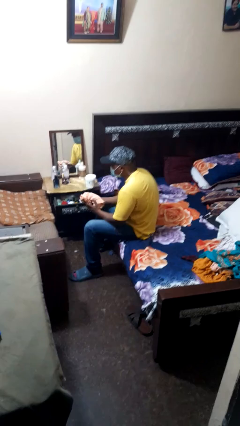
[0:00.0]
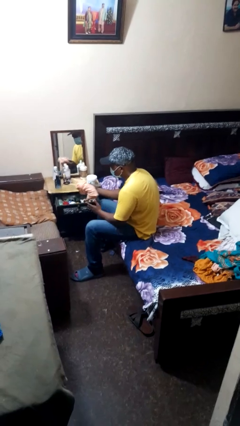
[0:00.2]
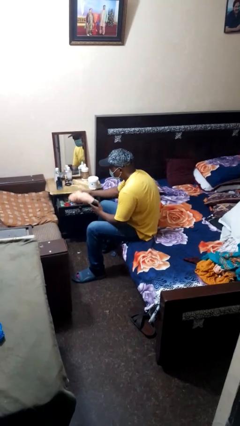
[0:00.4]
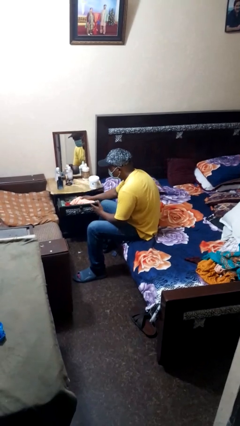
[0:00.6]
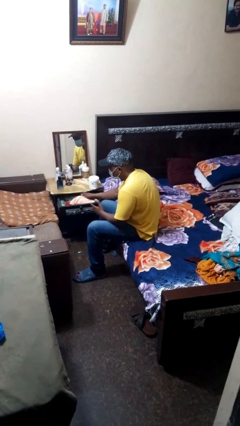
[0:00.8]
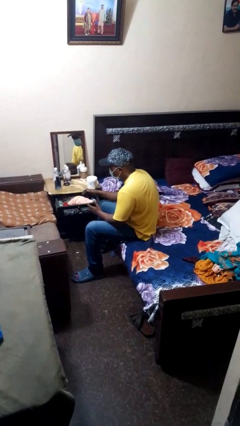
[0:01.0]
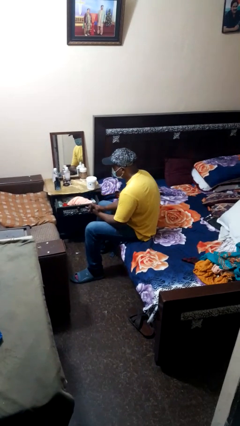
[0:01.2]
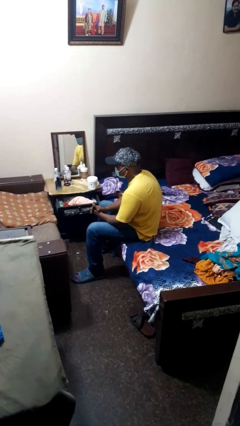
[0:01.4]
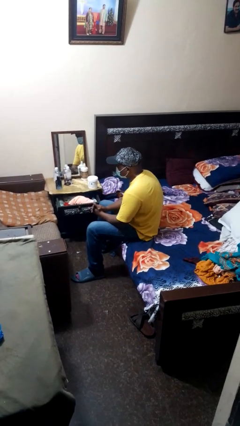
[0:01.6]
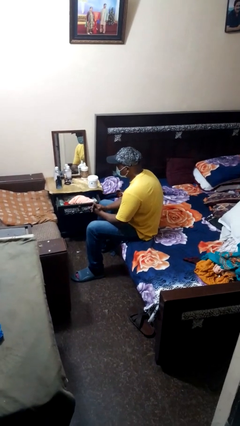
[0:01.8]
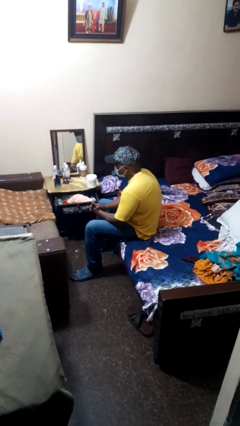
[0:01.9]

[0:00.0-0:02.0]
person puts clothes into dresser

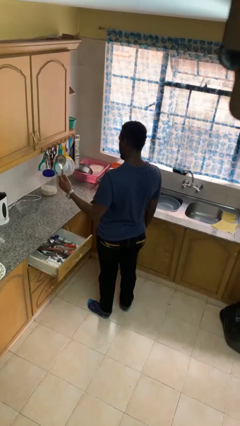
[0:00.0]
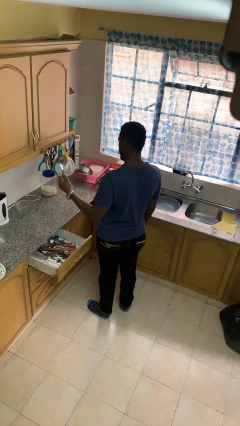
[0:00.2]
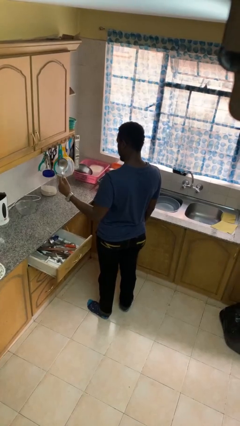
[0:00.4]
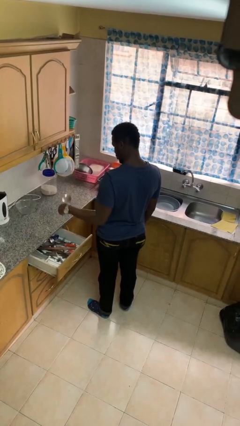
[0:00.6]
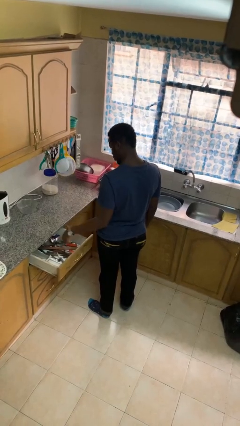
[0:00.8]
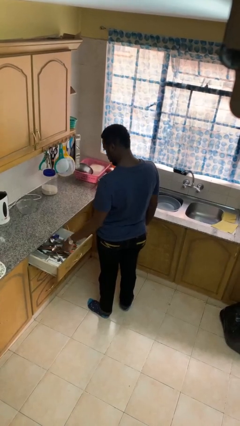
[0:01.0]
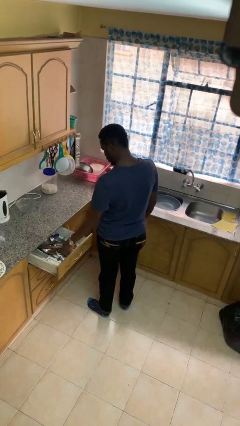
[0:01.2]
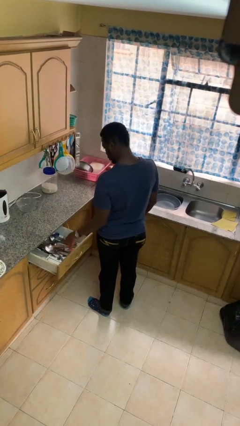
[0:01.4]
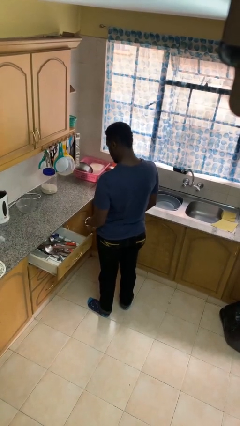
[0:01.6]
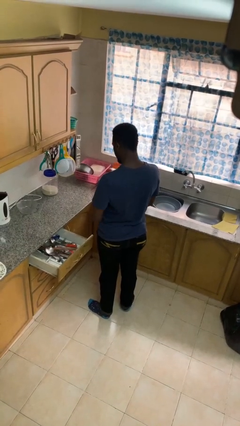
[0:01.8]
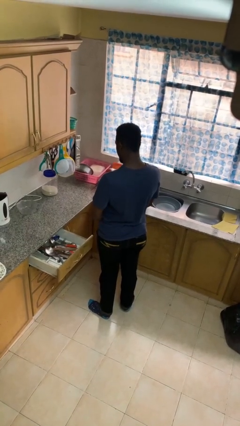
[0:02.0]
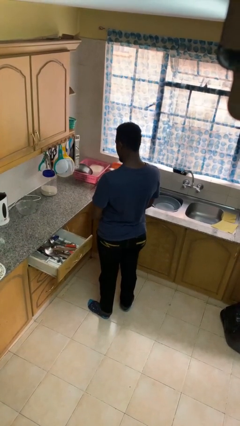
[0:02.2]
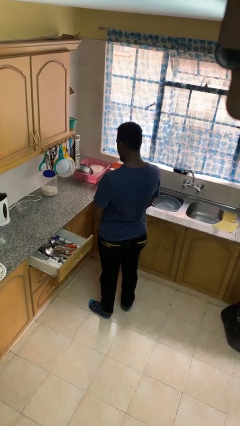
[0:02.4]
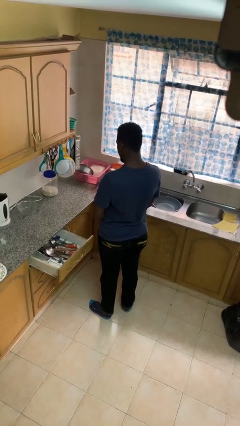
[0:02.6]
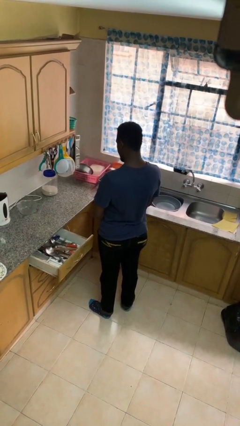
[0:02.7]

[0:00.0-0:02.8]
person puts object into kitchen drawer

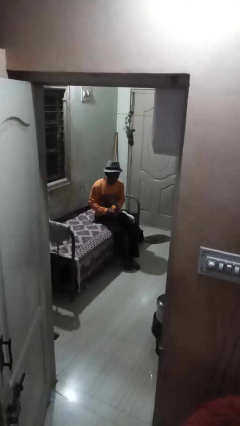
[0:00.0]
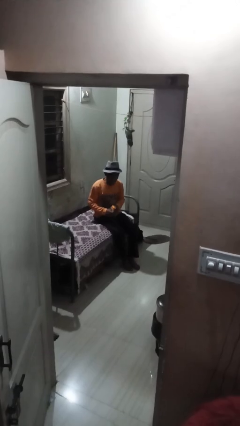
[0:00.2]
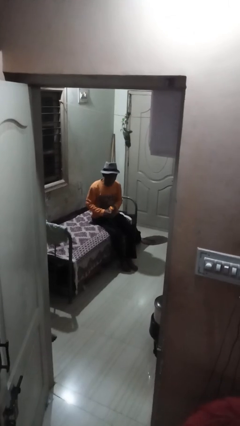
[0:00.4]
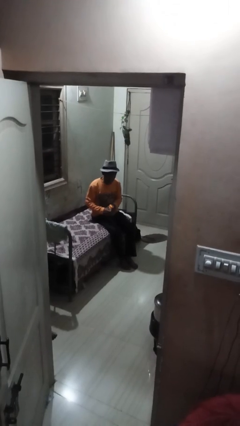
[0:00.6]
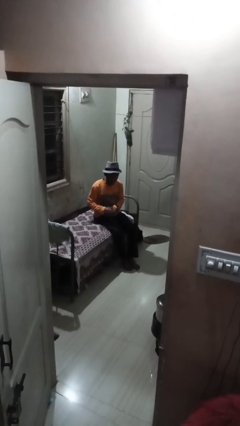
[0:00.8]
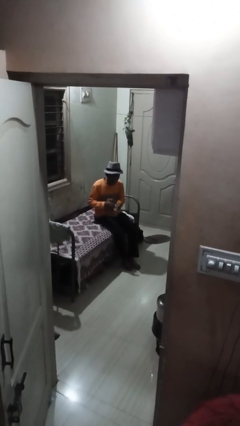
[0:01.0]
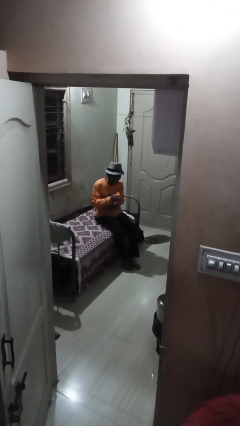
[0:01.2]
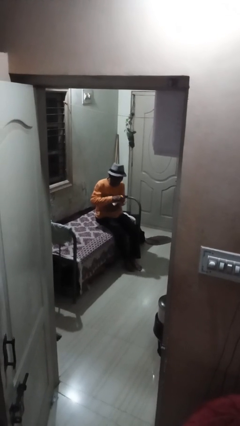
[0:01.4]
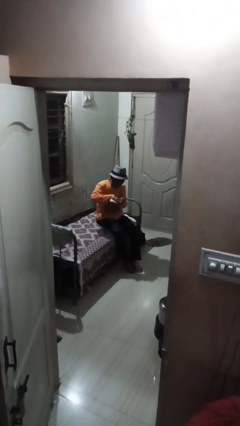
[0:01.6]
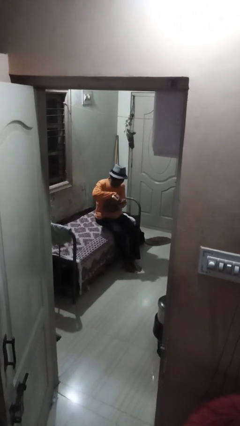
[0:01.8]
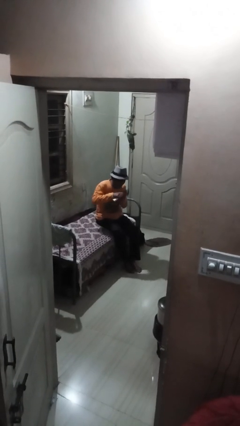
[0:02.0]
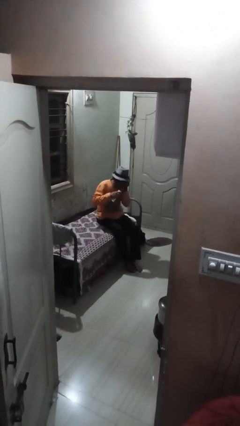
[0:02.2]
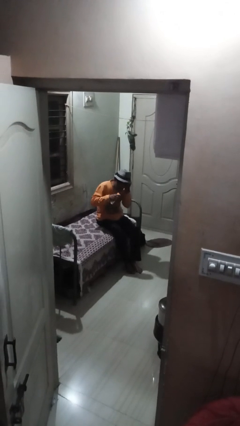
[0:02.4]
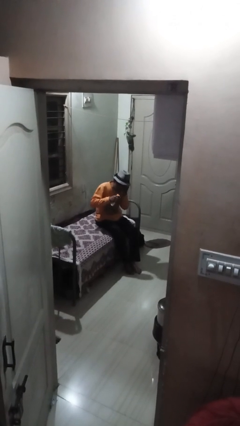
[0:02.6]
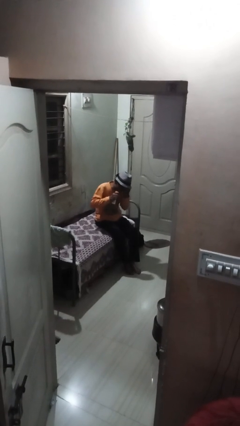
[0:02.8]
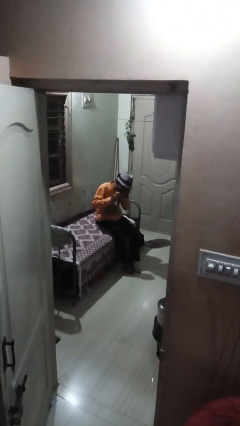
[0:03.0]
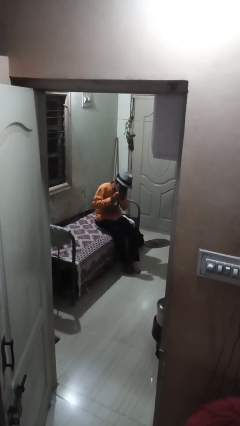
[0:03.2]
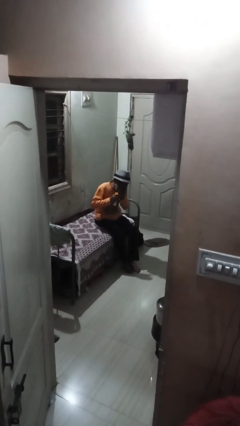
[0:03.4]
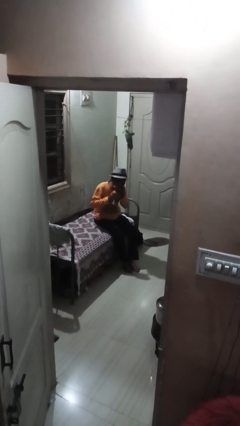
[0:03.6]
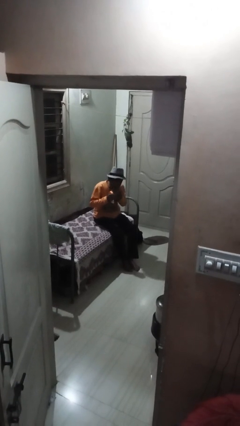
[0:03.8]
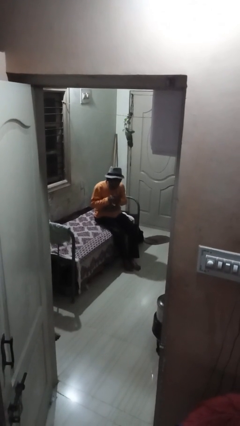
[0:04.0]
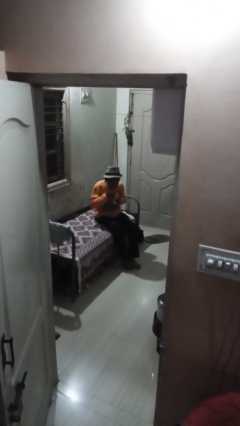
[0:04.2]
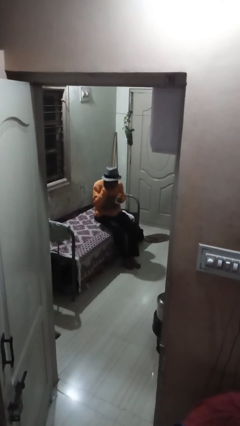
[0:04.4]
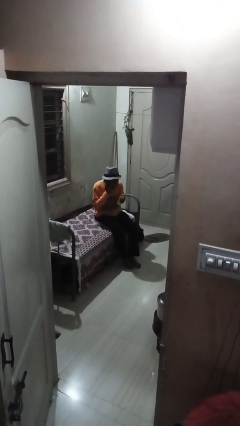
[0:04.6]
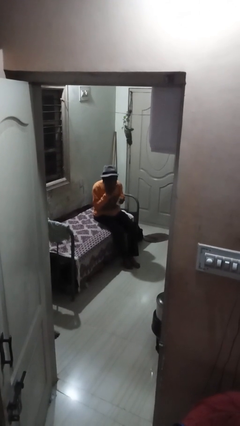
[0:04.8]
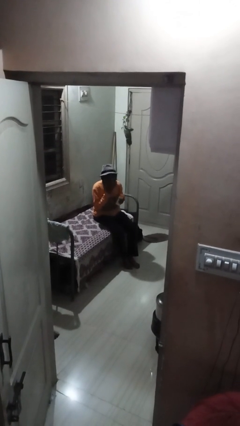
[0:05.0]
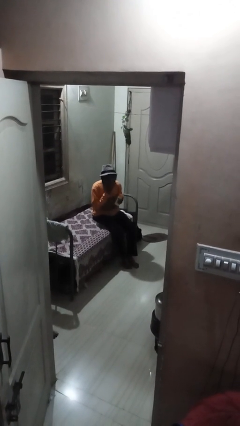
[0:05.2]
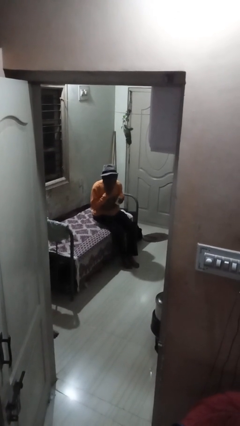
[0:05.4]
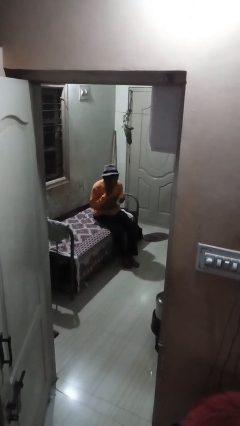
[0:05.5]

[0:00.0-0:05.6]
person applies facial moisturizer

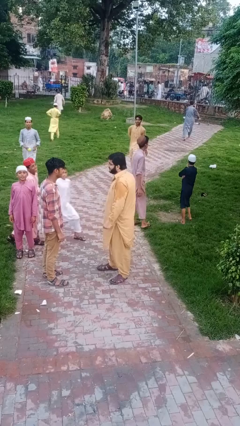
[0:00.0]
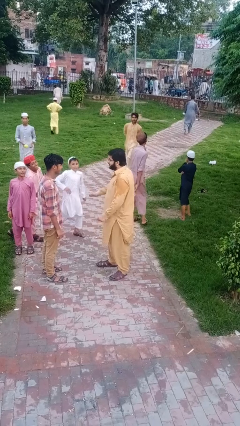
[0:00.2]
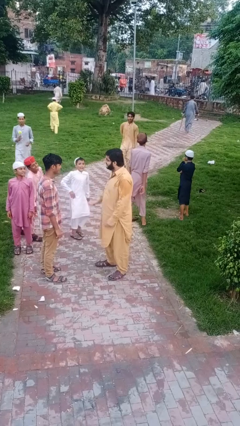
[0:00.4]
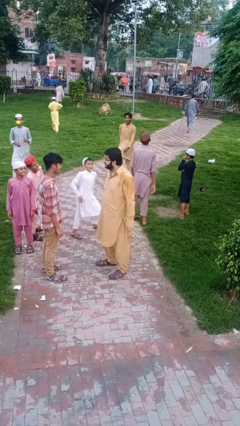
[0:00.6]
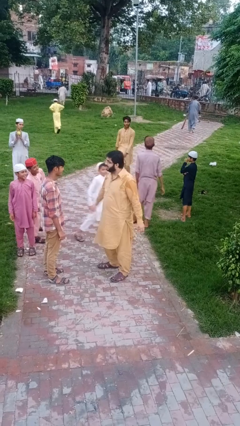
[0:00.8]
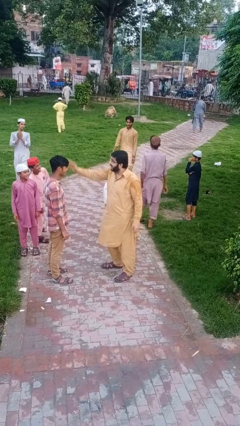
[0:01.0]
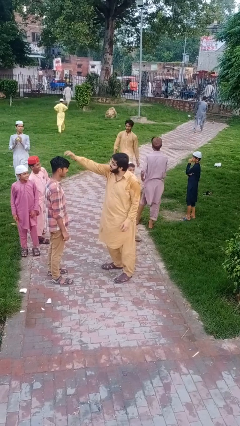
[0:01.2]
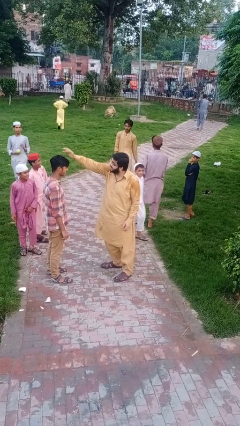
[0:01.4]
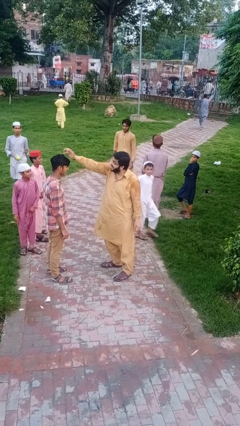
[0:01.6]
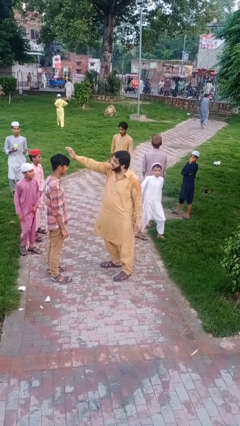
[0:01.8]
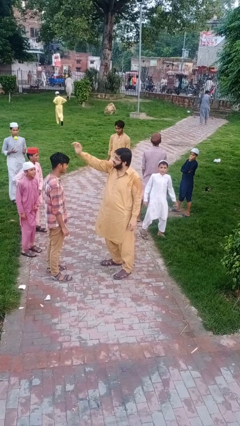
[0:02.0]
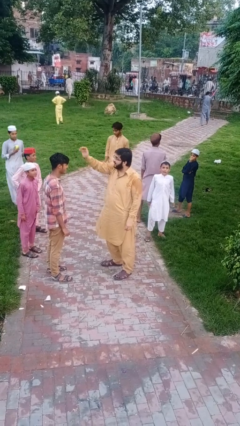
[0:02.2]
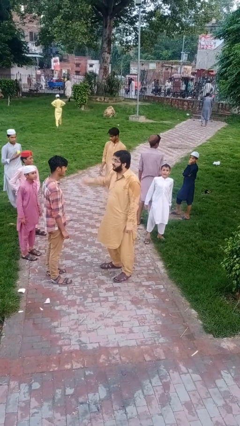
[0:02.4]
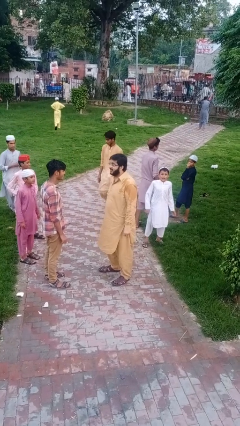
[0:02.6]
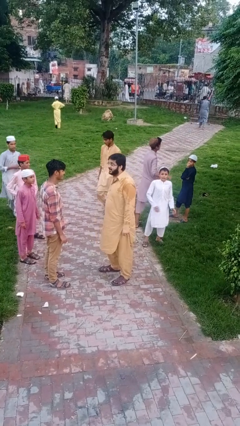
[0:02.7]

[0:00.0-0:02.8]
person grabs person by hair

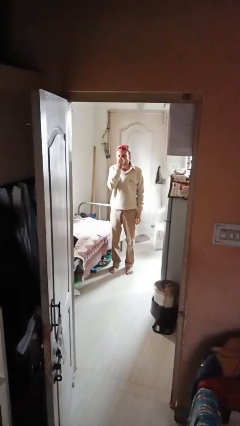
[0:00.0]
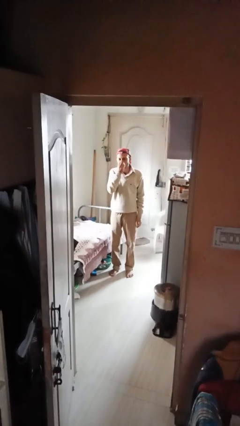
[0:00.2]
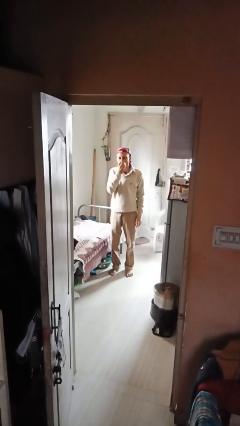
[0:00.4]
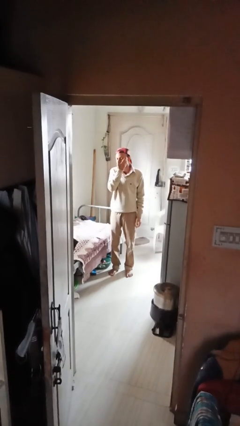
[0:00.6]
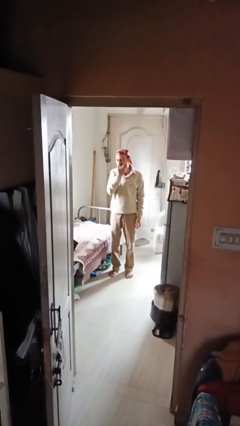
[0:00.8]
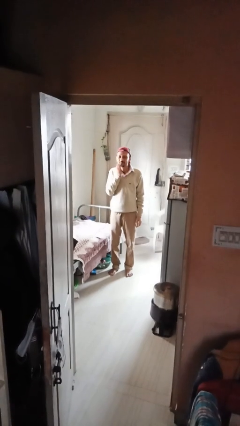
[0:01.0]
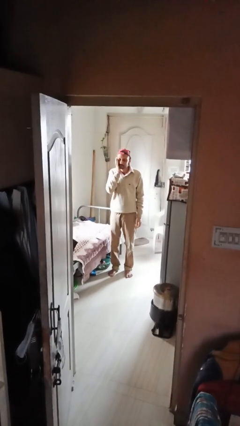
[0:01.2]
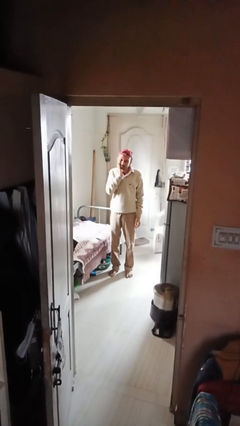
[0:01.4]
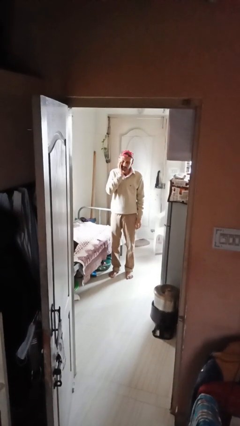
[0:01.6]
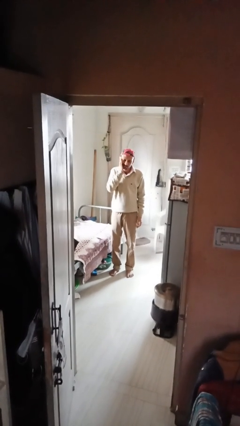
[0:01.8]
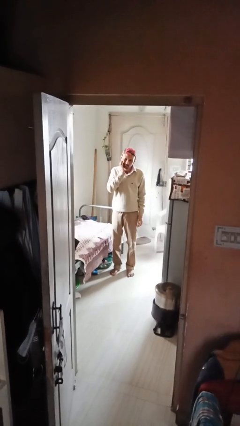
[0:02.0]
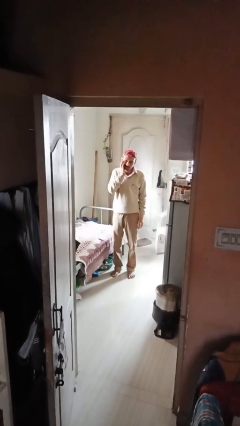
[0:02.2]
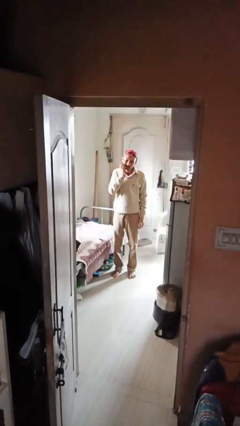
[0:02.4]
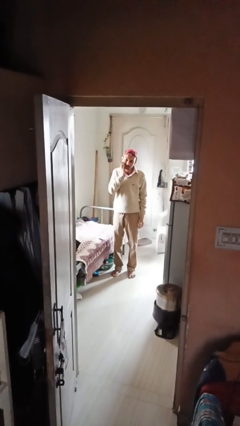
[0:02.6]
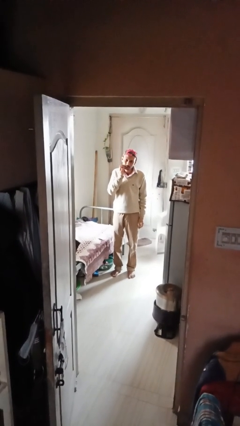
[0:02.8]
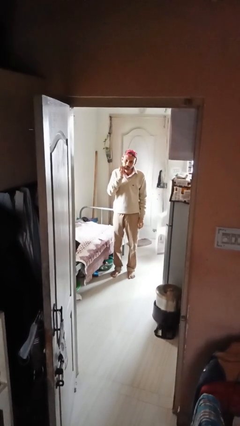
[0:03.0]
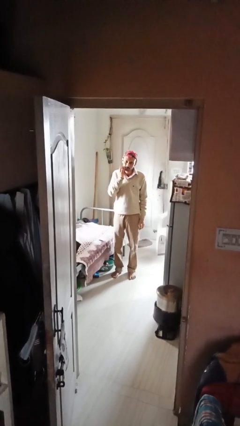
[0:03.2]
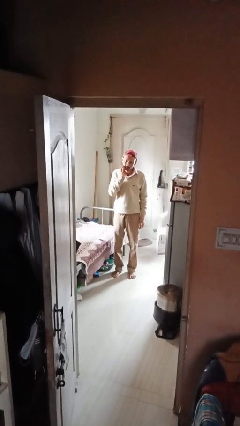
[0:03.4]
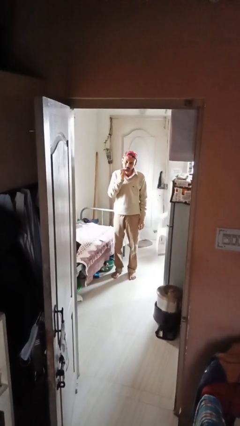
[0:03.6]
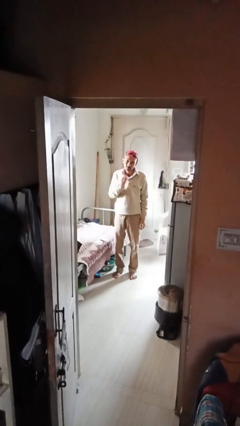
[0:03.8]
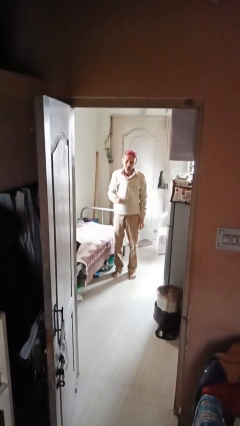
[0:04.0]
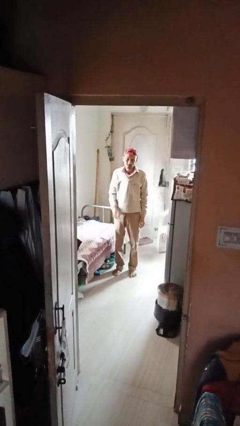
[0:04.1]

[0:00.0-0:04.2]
person scratches face

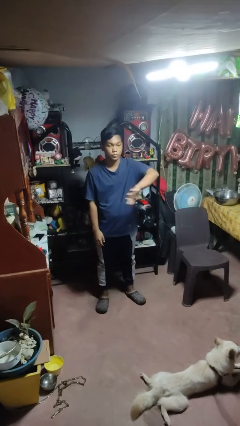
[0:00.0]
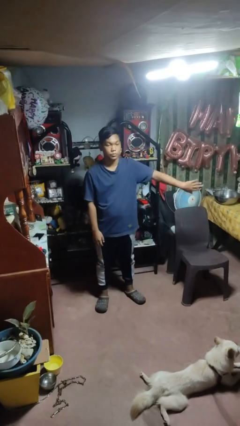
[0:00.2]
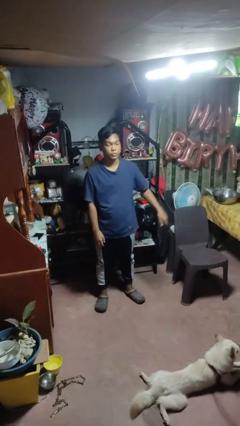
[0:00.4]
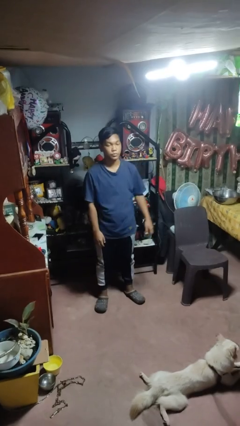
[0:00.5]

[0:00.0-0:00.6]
person gestures swipe left
